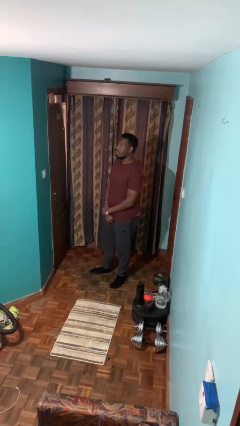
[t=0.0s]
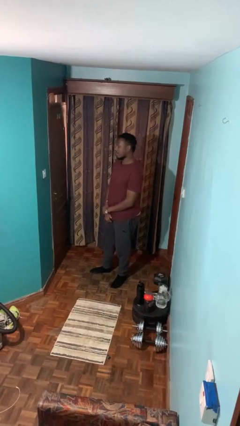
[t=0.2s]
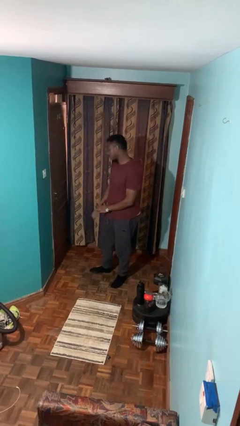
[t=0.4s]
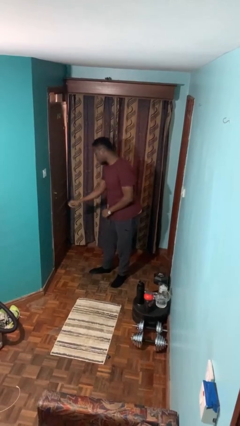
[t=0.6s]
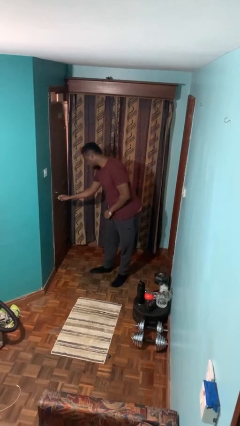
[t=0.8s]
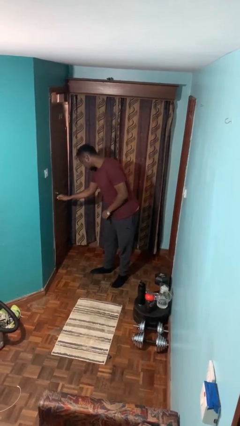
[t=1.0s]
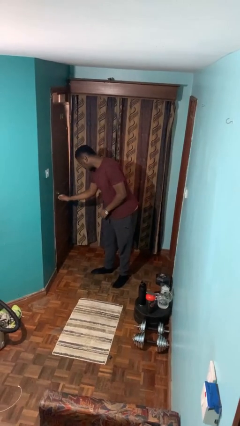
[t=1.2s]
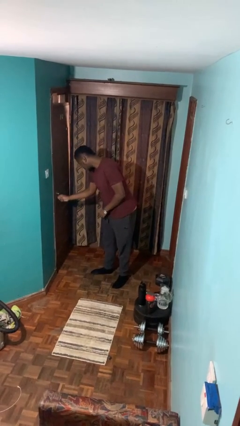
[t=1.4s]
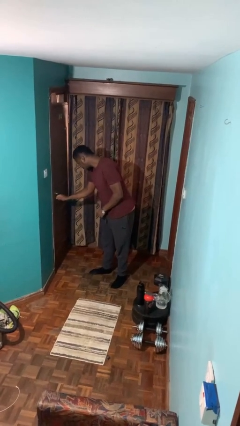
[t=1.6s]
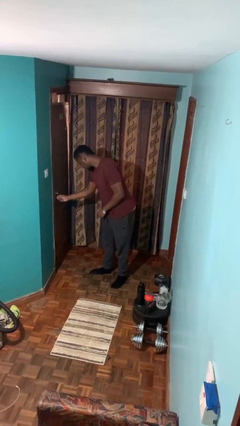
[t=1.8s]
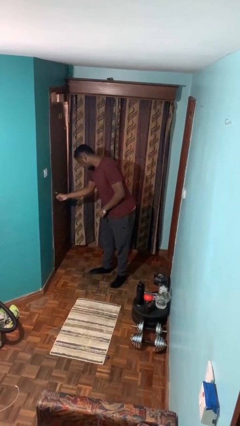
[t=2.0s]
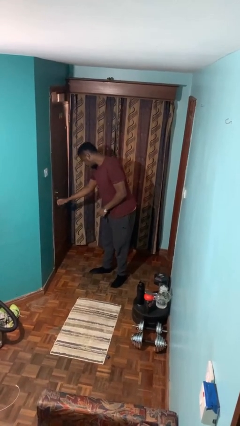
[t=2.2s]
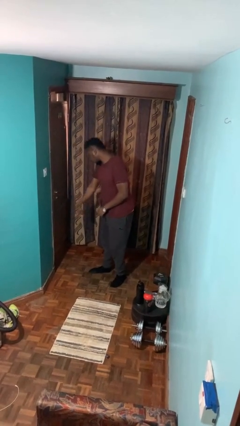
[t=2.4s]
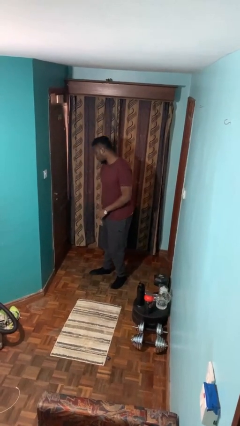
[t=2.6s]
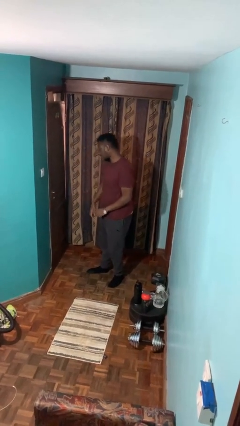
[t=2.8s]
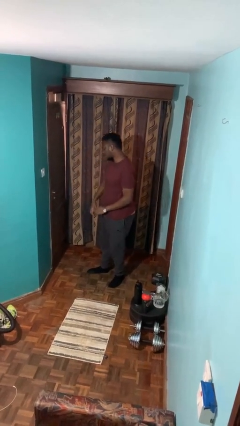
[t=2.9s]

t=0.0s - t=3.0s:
person unlocks door with keys

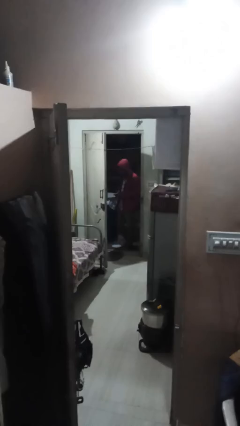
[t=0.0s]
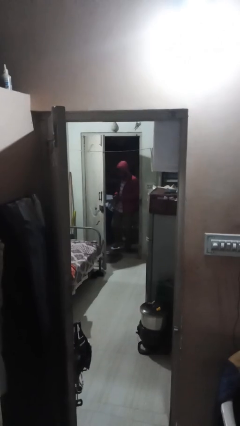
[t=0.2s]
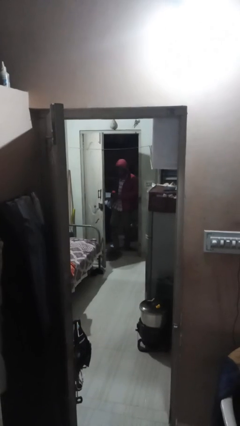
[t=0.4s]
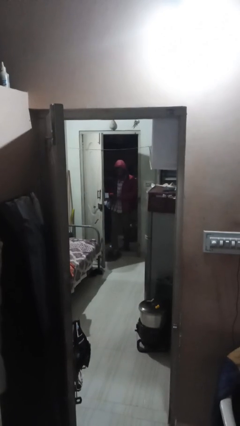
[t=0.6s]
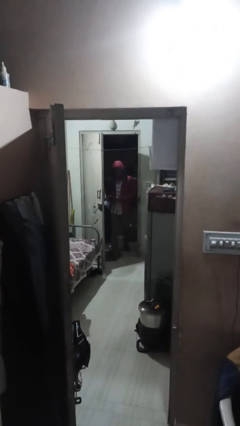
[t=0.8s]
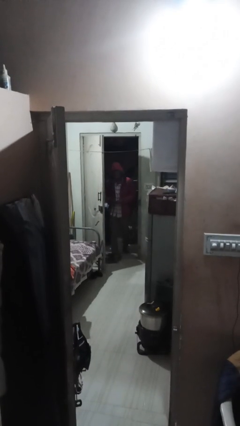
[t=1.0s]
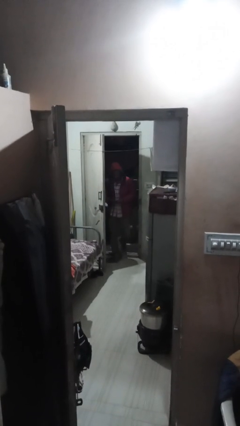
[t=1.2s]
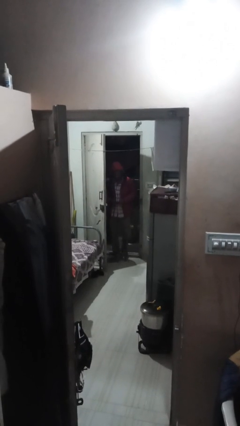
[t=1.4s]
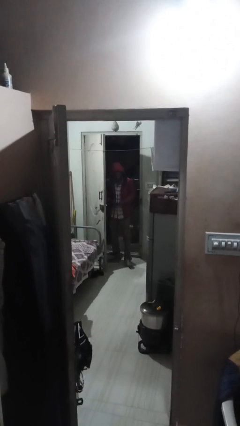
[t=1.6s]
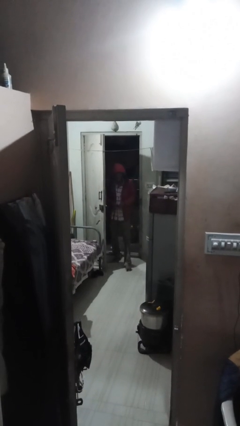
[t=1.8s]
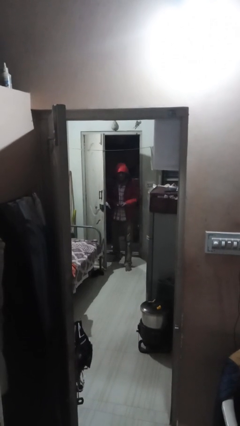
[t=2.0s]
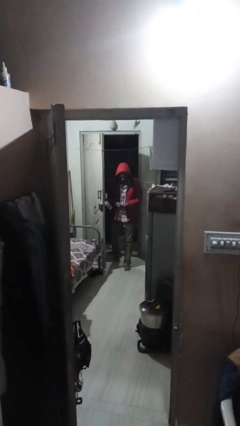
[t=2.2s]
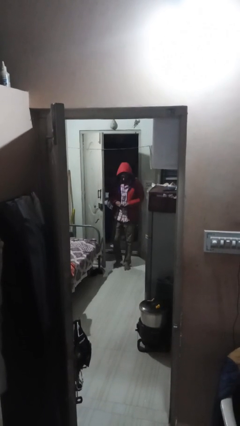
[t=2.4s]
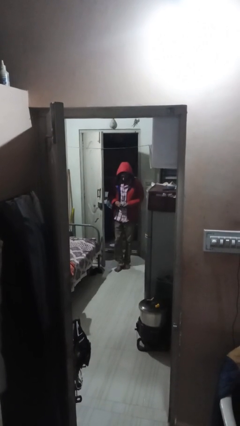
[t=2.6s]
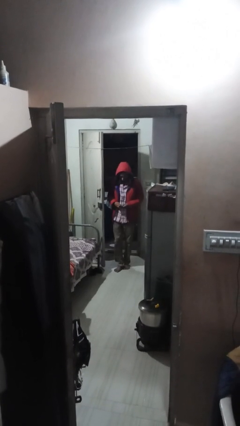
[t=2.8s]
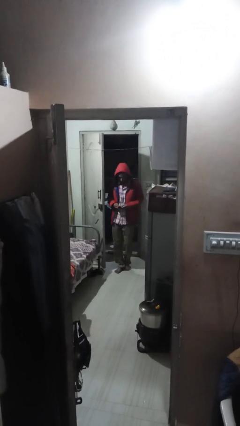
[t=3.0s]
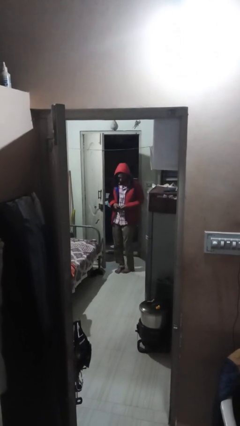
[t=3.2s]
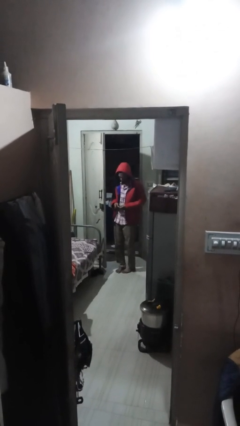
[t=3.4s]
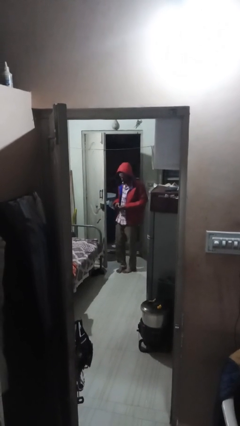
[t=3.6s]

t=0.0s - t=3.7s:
person enters scene through structure

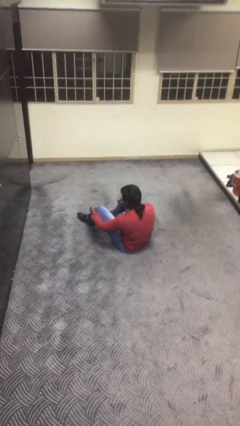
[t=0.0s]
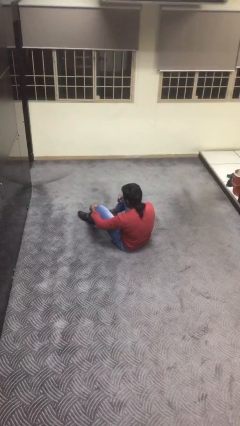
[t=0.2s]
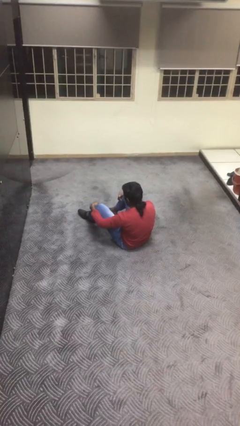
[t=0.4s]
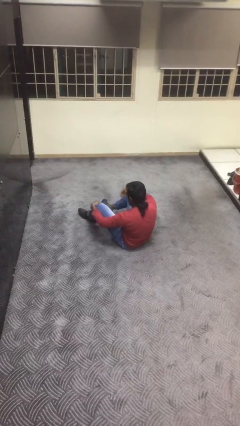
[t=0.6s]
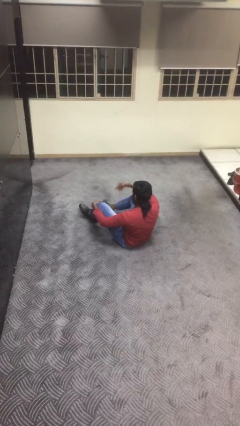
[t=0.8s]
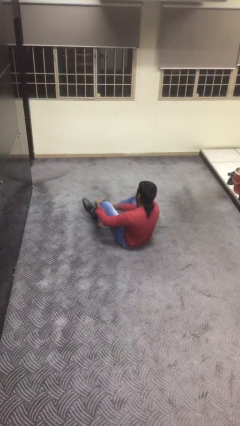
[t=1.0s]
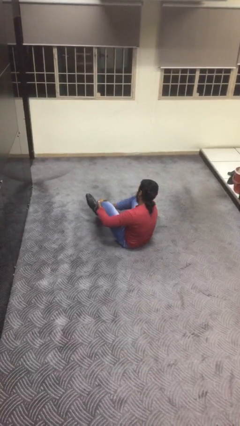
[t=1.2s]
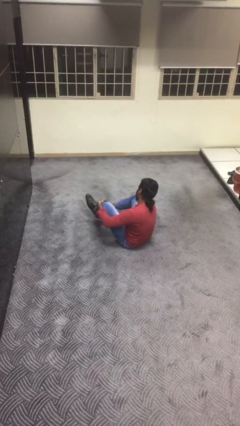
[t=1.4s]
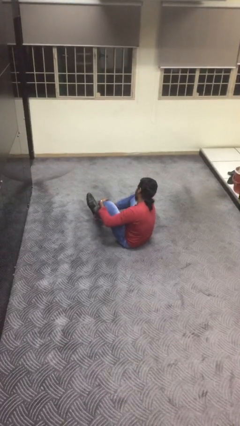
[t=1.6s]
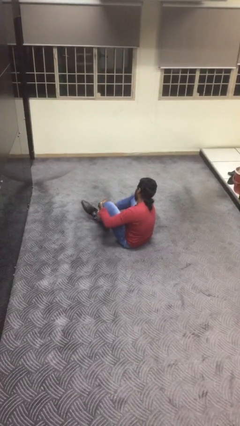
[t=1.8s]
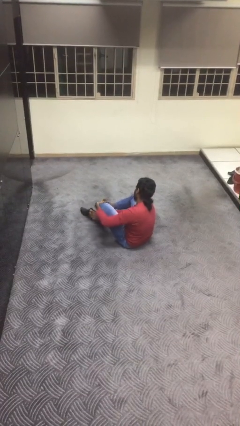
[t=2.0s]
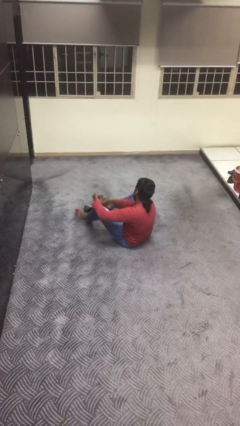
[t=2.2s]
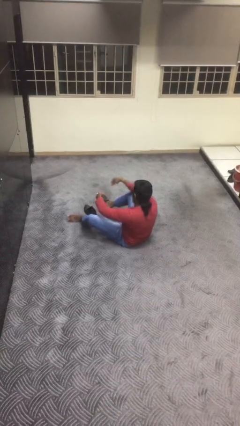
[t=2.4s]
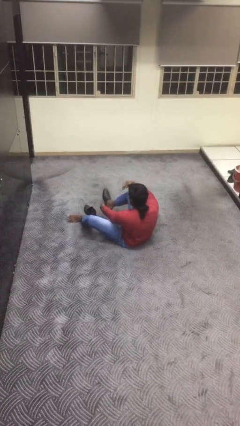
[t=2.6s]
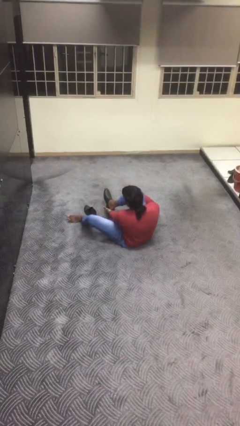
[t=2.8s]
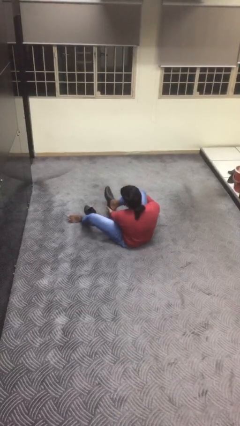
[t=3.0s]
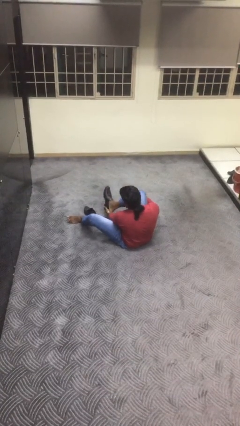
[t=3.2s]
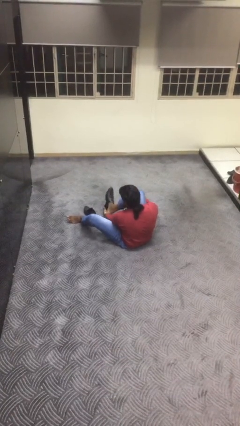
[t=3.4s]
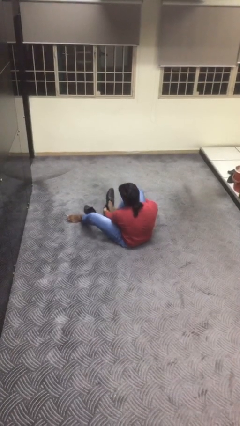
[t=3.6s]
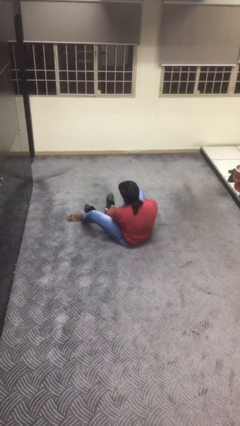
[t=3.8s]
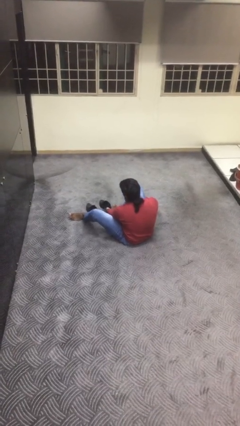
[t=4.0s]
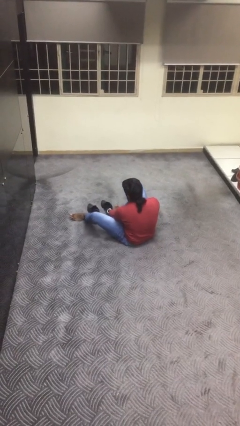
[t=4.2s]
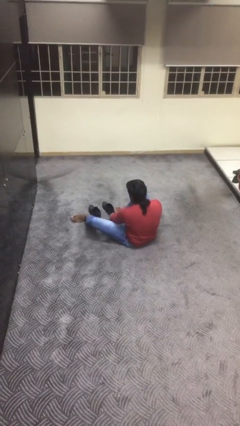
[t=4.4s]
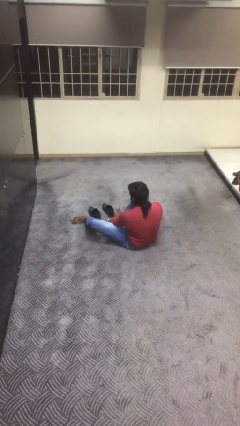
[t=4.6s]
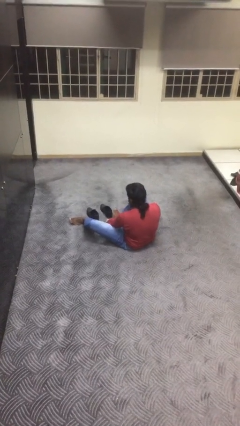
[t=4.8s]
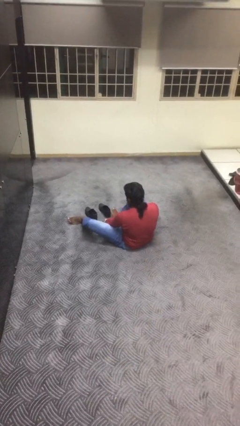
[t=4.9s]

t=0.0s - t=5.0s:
person takes off shoes

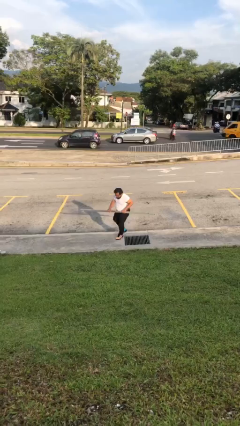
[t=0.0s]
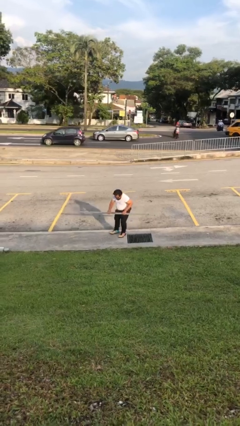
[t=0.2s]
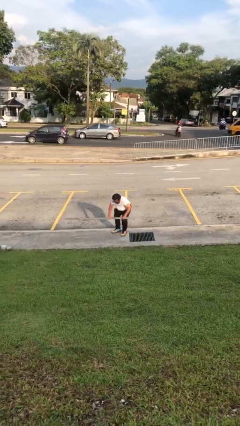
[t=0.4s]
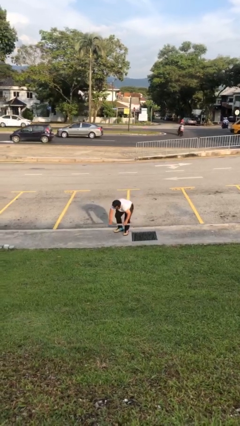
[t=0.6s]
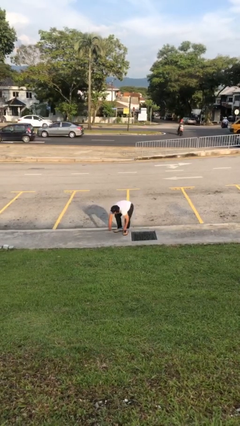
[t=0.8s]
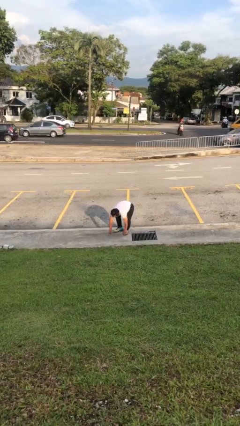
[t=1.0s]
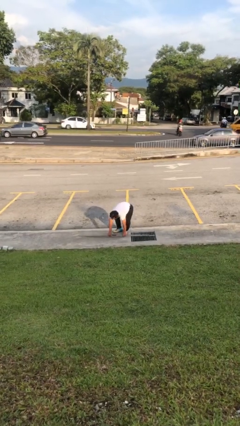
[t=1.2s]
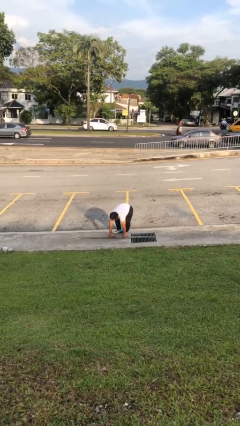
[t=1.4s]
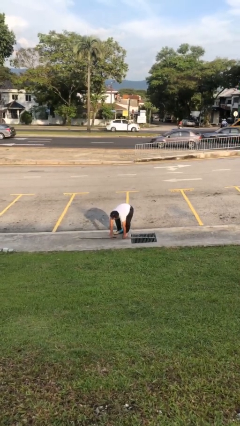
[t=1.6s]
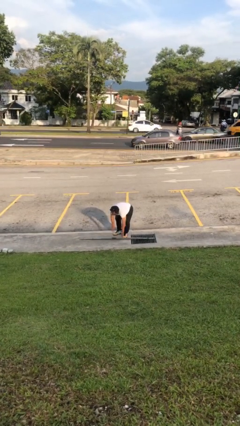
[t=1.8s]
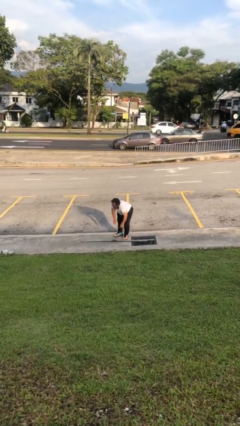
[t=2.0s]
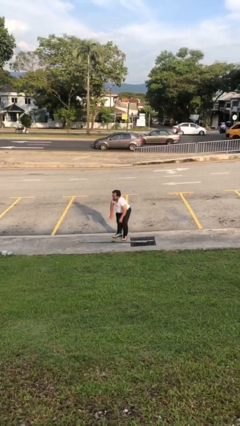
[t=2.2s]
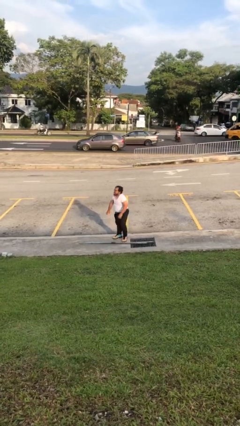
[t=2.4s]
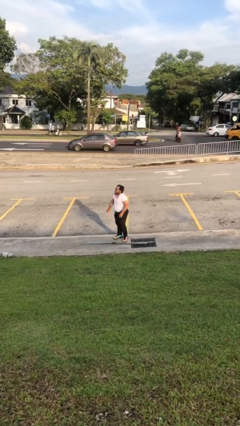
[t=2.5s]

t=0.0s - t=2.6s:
person puts down object on floor

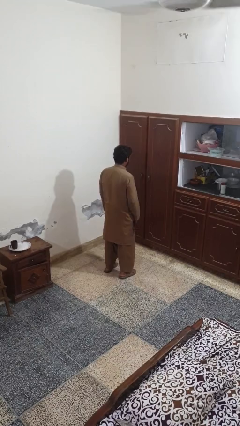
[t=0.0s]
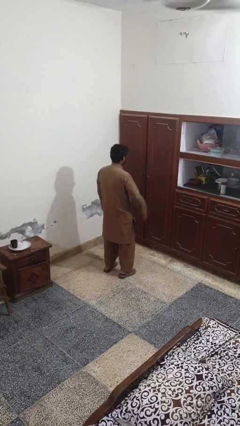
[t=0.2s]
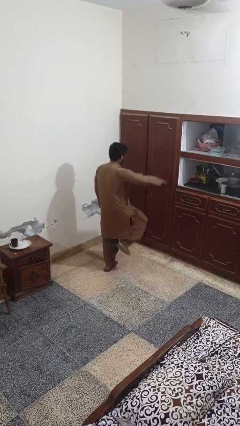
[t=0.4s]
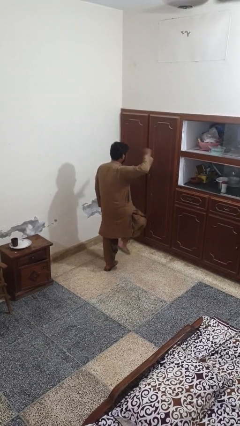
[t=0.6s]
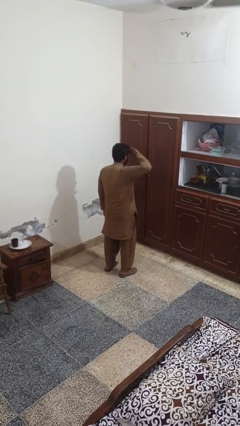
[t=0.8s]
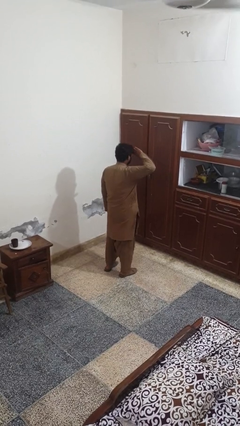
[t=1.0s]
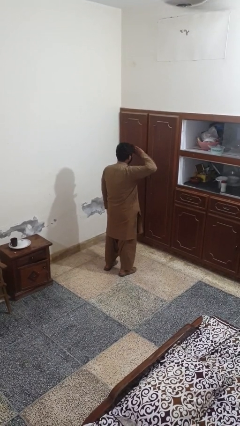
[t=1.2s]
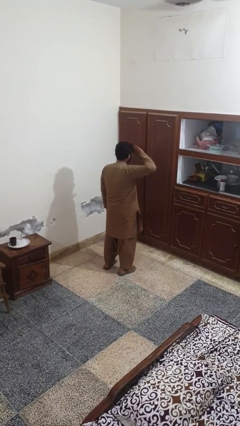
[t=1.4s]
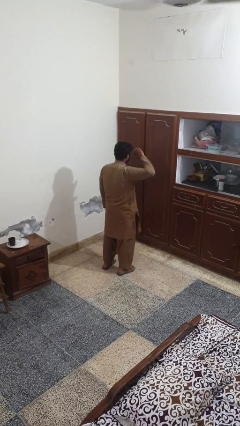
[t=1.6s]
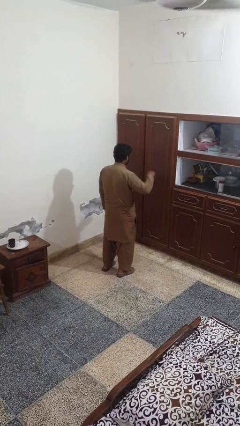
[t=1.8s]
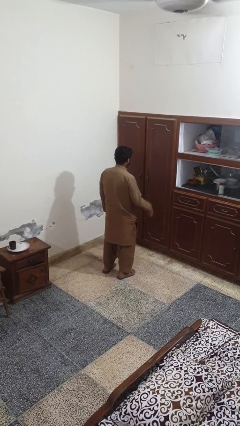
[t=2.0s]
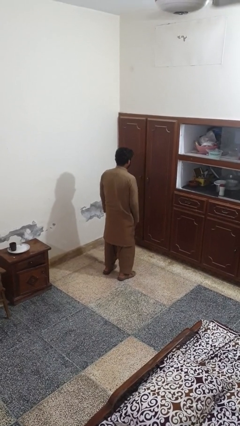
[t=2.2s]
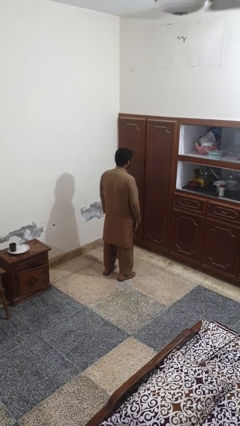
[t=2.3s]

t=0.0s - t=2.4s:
person salutes

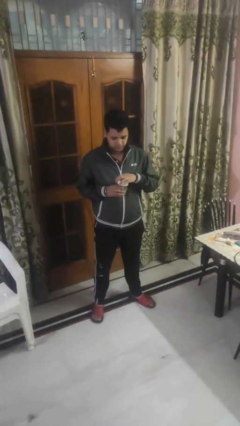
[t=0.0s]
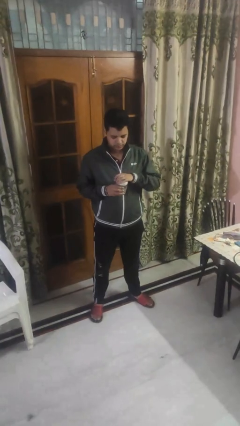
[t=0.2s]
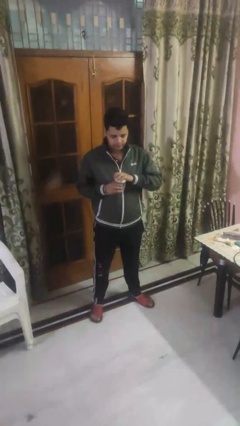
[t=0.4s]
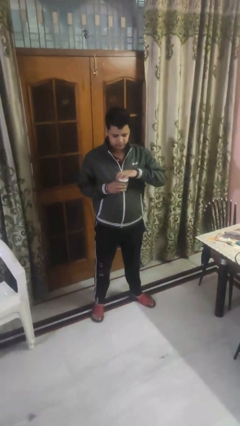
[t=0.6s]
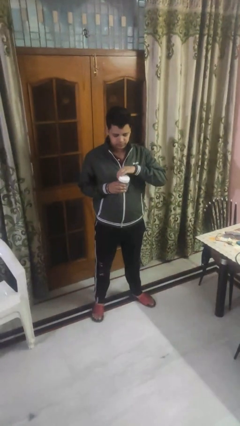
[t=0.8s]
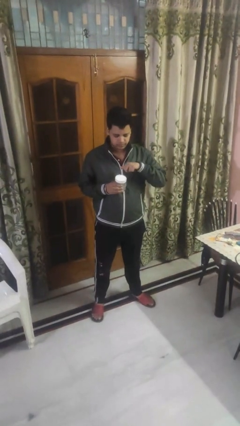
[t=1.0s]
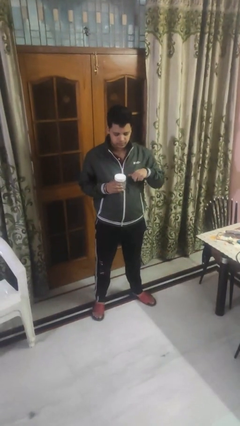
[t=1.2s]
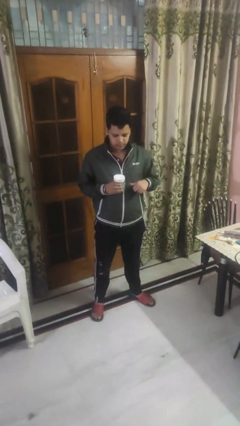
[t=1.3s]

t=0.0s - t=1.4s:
person closes jar
